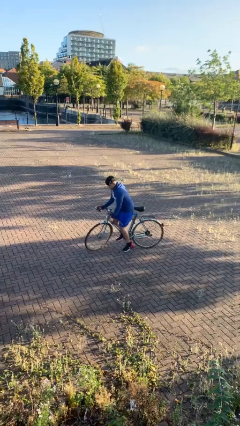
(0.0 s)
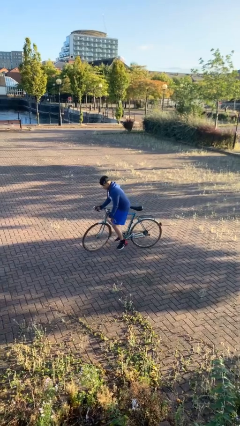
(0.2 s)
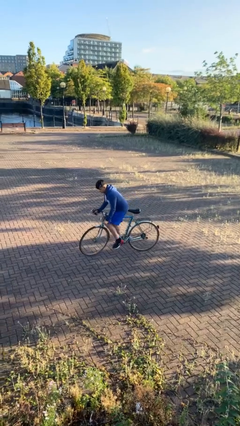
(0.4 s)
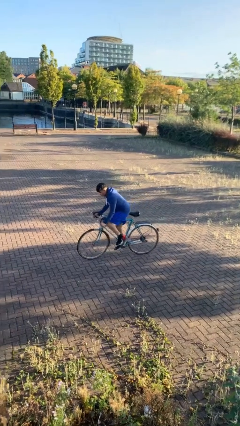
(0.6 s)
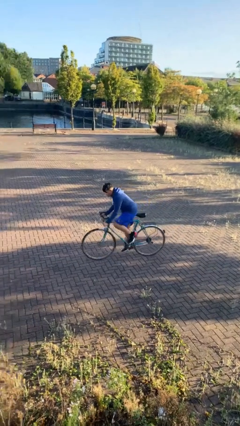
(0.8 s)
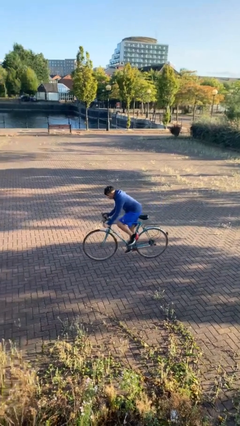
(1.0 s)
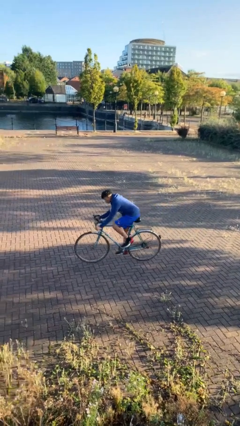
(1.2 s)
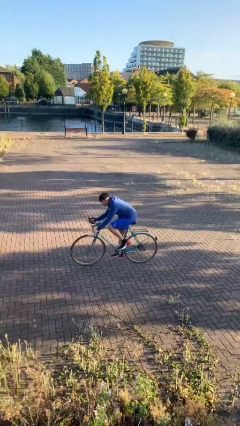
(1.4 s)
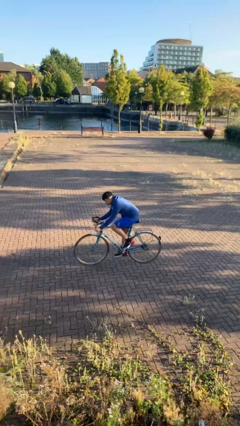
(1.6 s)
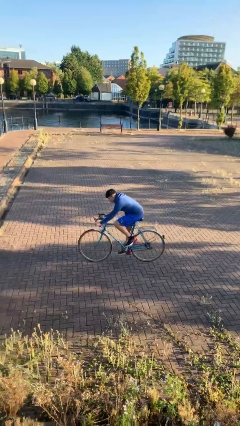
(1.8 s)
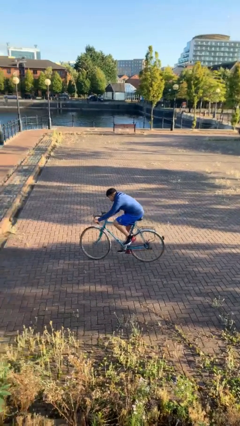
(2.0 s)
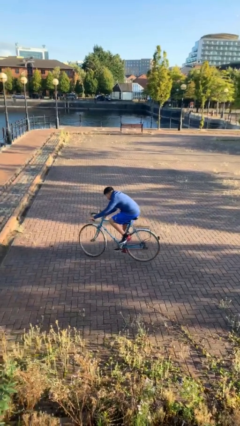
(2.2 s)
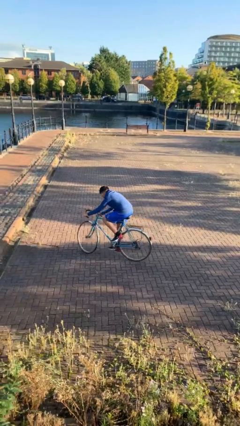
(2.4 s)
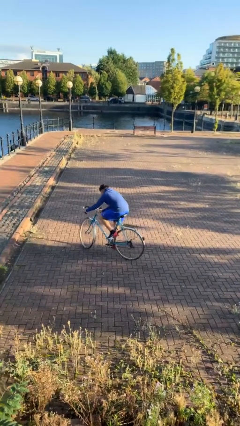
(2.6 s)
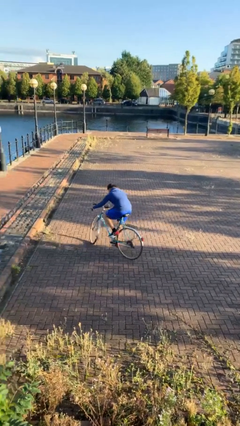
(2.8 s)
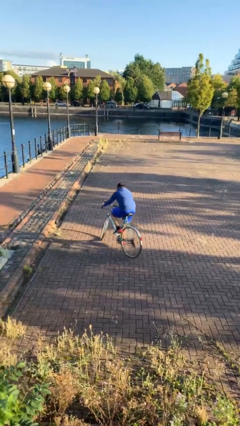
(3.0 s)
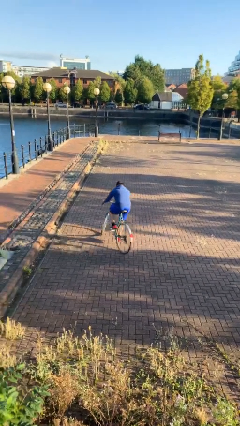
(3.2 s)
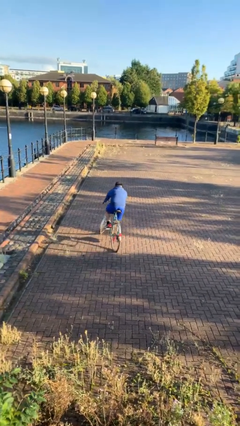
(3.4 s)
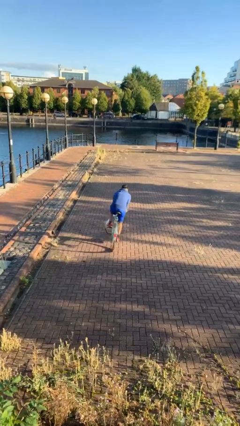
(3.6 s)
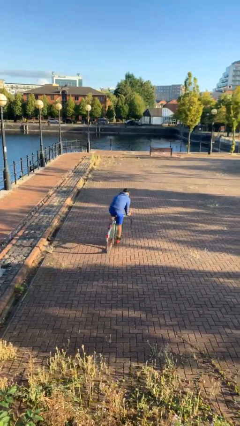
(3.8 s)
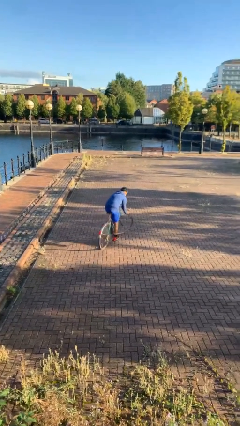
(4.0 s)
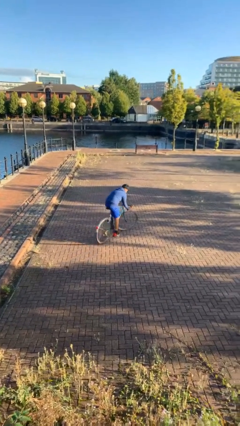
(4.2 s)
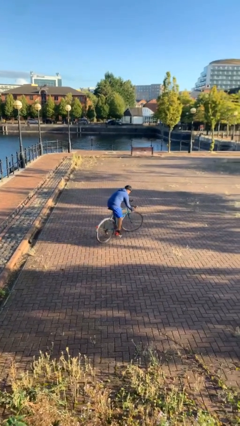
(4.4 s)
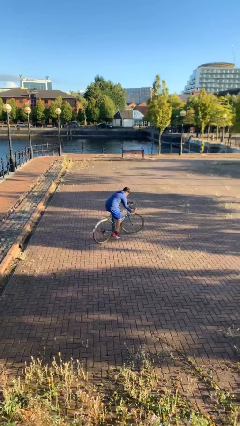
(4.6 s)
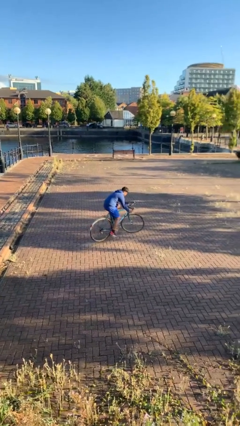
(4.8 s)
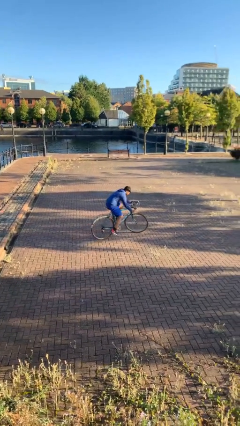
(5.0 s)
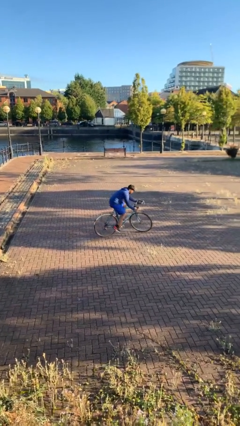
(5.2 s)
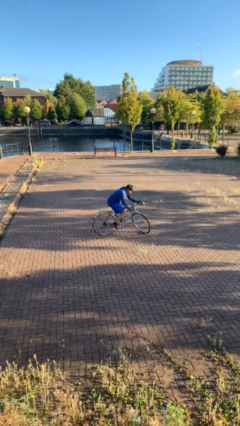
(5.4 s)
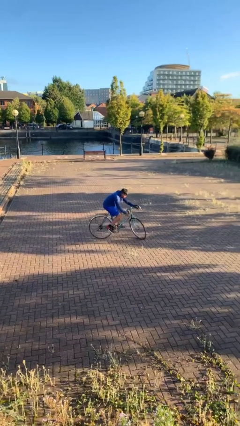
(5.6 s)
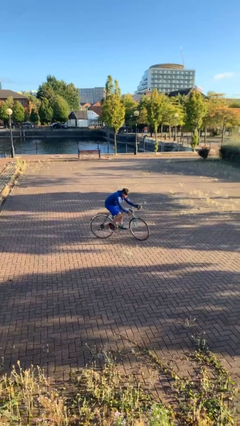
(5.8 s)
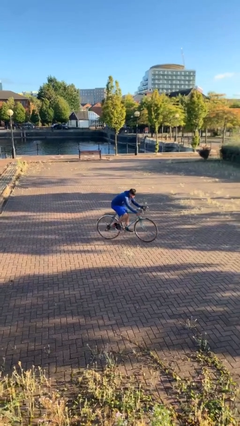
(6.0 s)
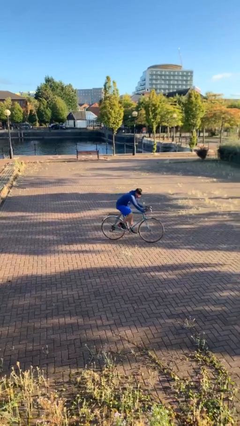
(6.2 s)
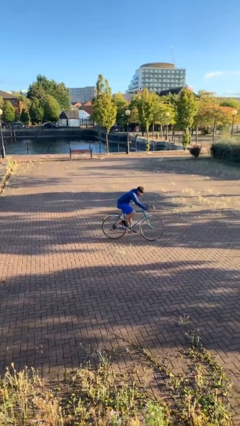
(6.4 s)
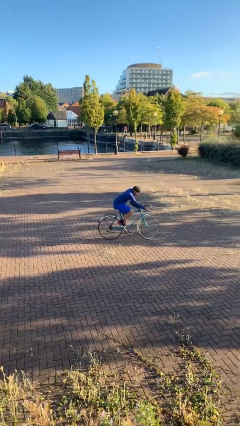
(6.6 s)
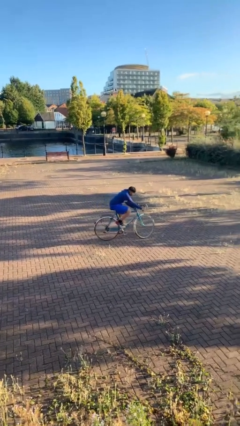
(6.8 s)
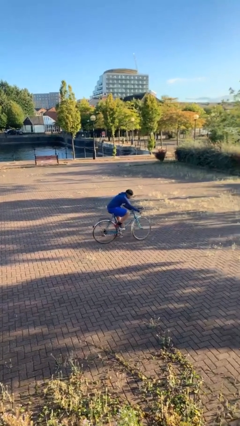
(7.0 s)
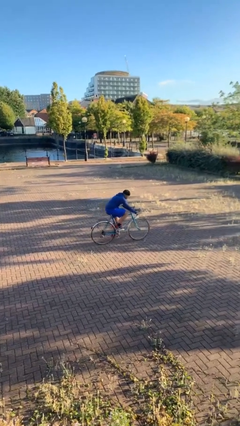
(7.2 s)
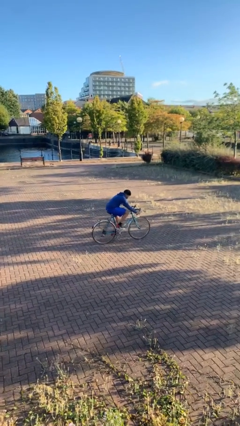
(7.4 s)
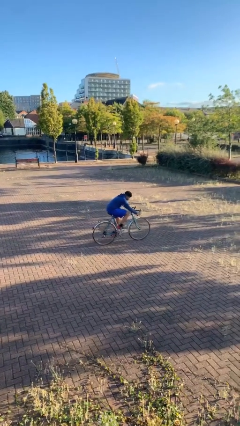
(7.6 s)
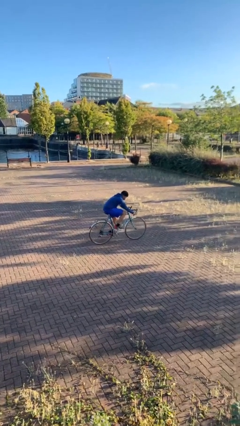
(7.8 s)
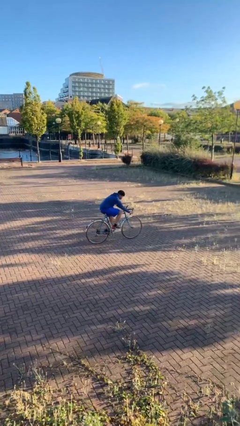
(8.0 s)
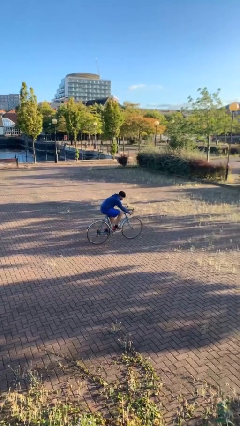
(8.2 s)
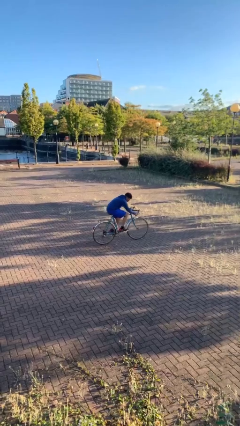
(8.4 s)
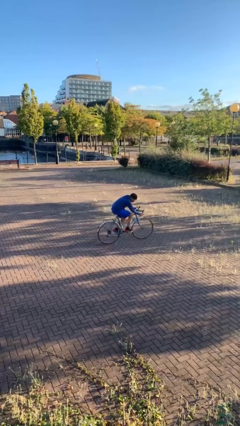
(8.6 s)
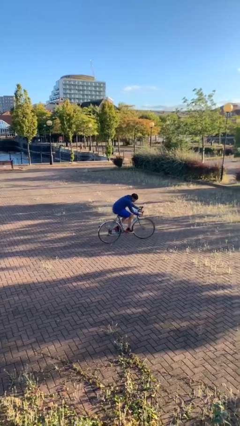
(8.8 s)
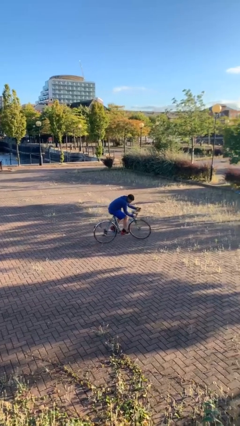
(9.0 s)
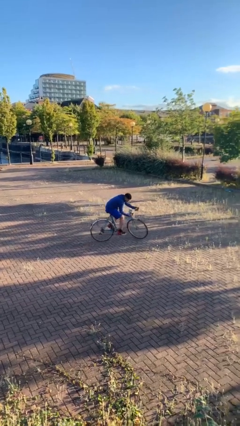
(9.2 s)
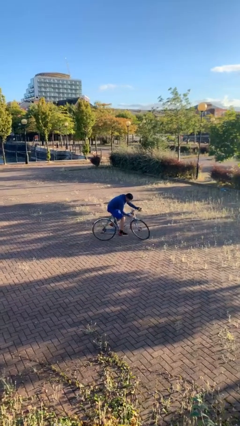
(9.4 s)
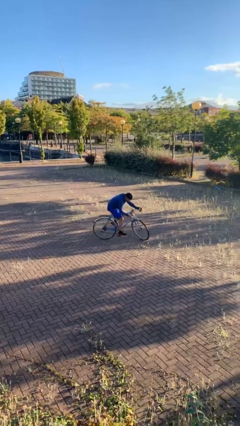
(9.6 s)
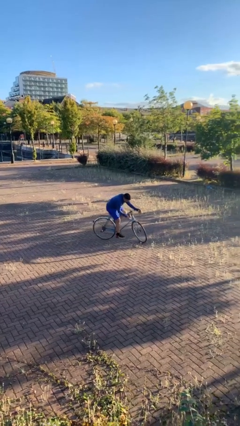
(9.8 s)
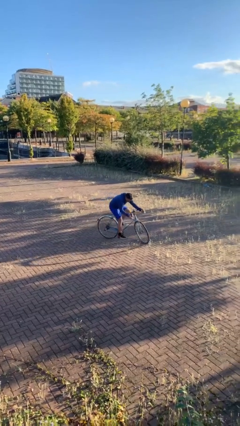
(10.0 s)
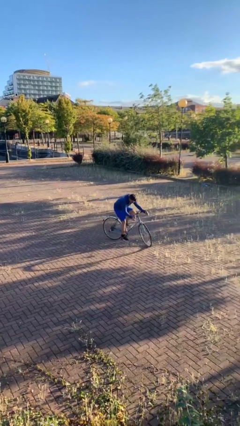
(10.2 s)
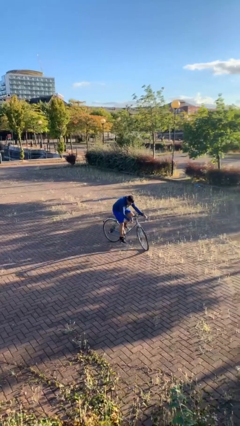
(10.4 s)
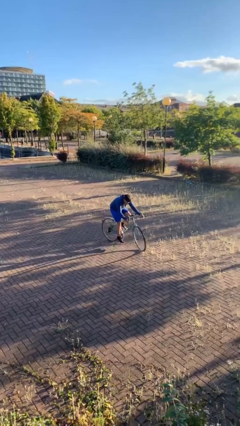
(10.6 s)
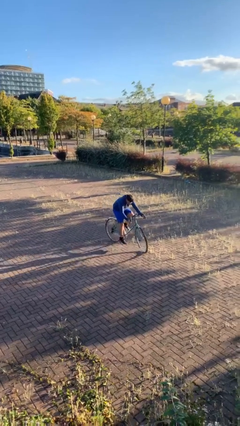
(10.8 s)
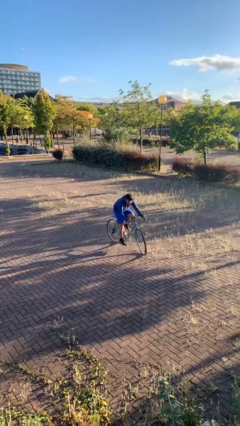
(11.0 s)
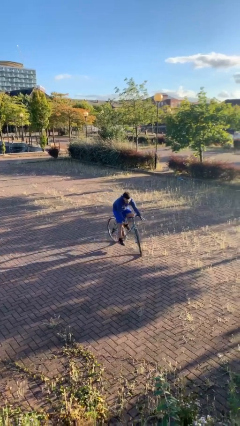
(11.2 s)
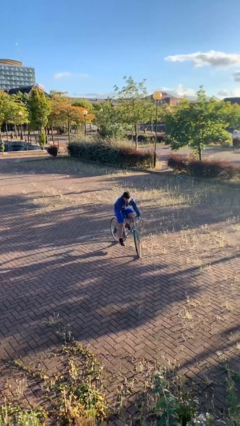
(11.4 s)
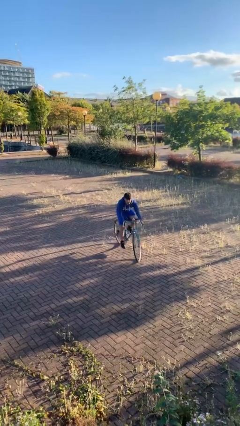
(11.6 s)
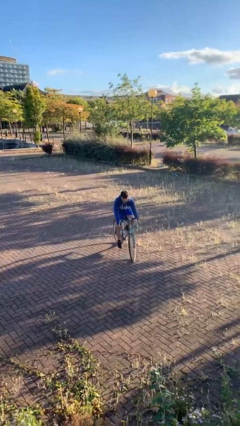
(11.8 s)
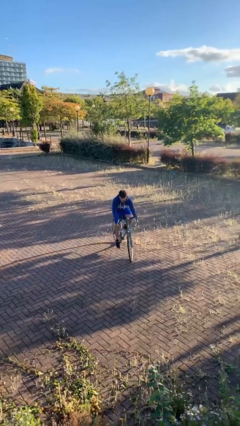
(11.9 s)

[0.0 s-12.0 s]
person rides bicycle

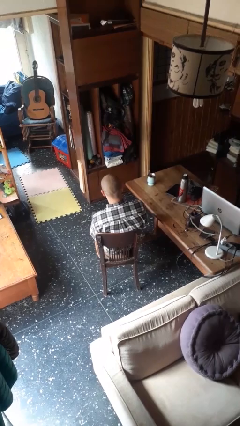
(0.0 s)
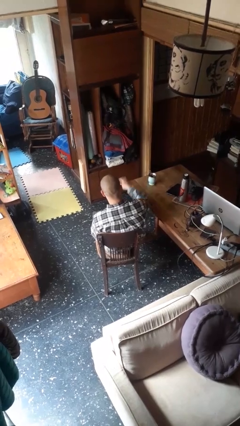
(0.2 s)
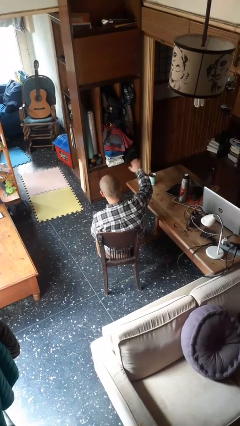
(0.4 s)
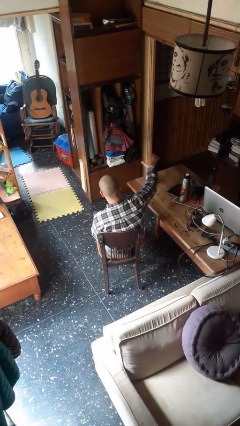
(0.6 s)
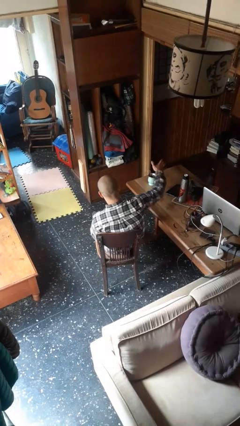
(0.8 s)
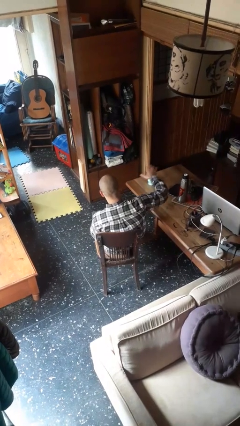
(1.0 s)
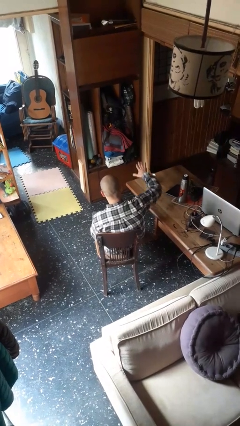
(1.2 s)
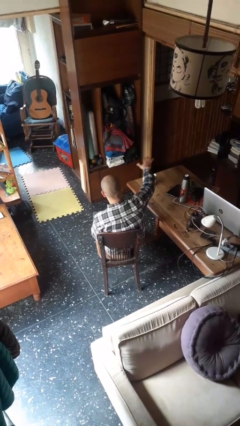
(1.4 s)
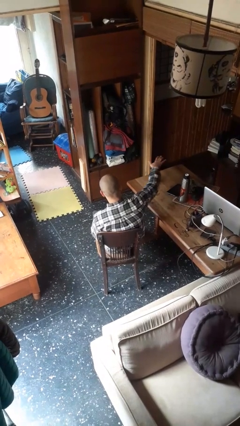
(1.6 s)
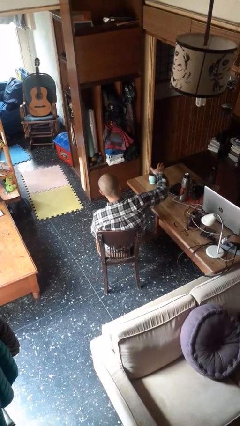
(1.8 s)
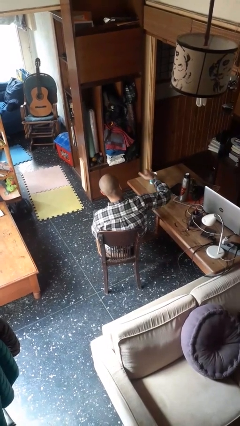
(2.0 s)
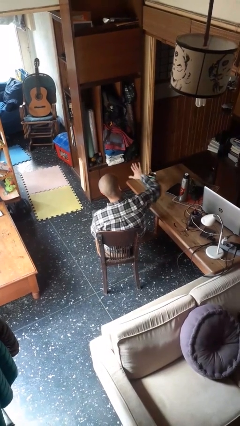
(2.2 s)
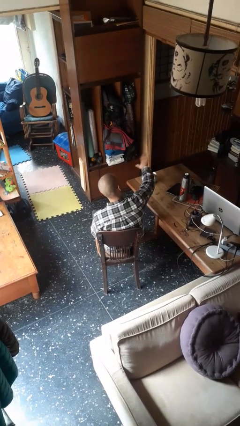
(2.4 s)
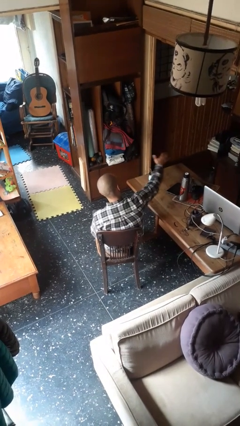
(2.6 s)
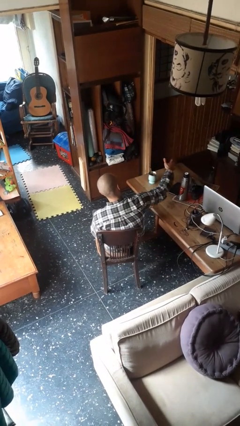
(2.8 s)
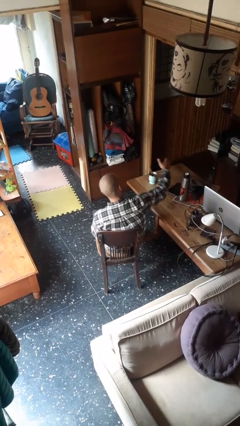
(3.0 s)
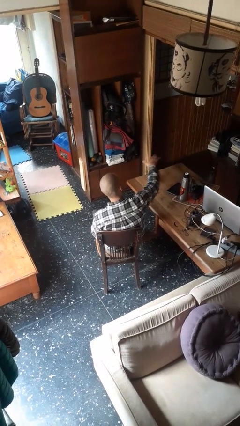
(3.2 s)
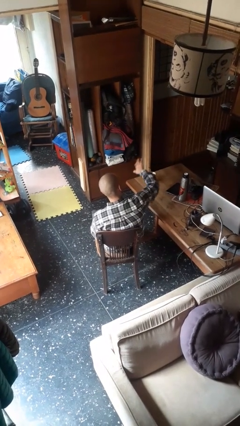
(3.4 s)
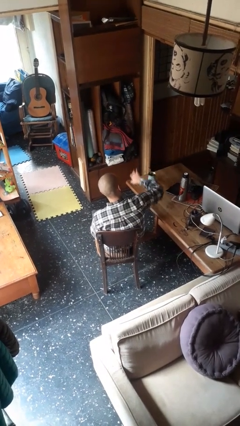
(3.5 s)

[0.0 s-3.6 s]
person waves hand over object

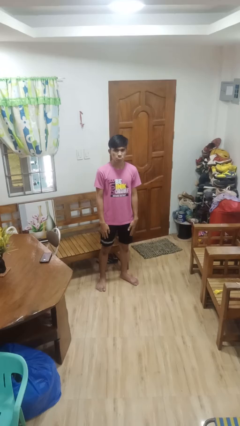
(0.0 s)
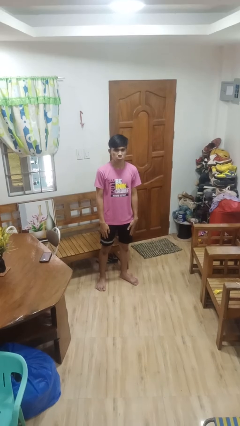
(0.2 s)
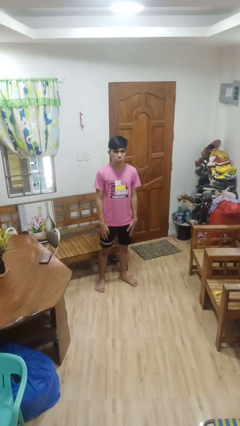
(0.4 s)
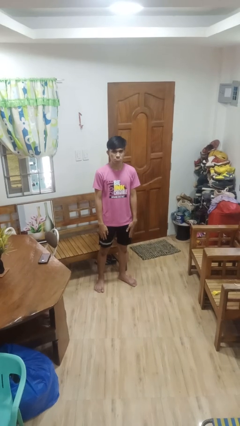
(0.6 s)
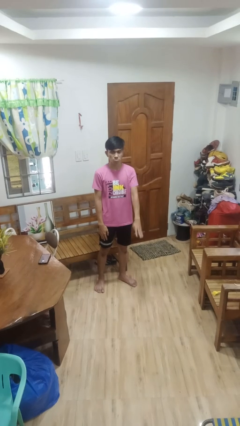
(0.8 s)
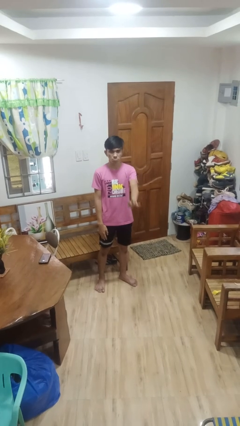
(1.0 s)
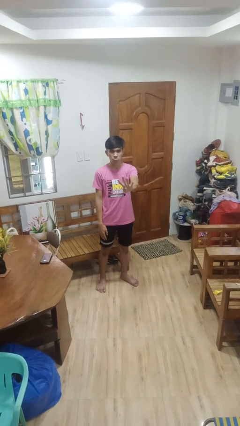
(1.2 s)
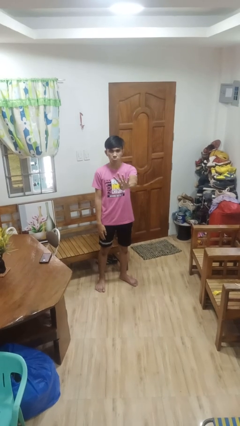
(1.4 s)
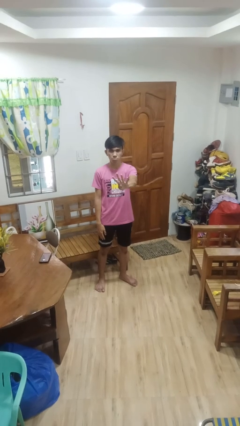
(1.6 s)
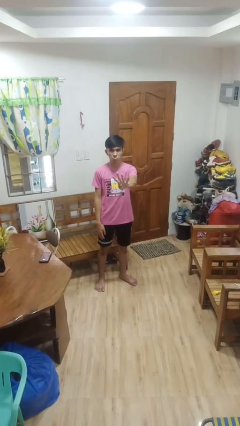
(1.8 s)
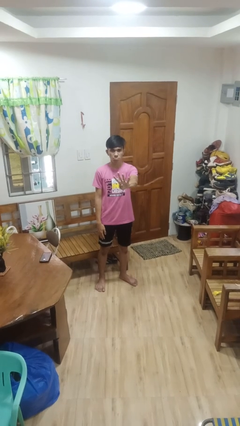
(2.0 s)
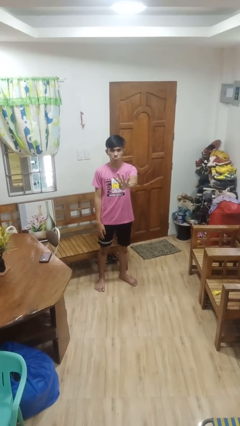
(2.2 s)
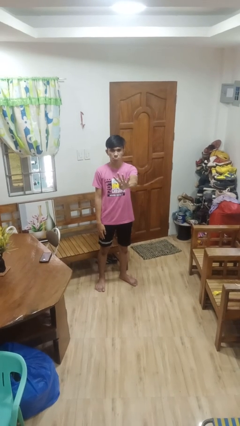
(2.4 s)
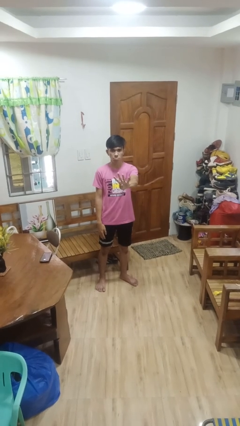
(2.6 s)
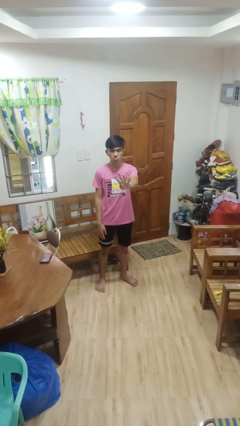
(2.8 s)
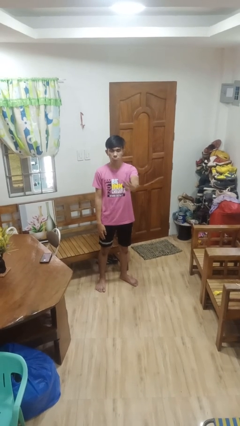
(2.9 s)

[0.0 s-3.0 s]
person gestures number four
